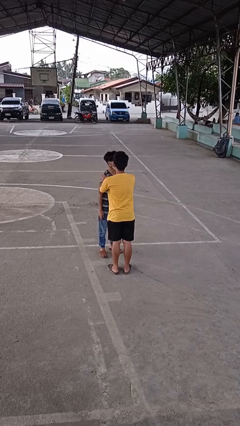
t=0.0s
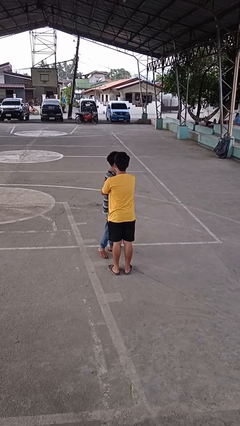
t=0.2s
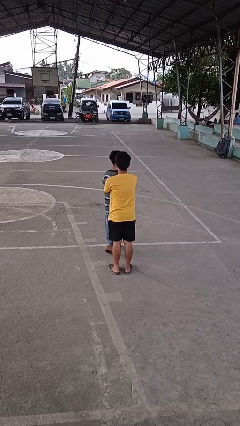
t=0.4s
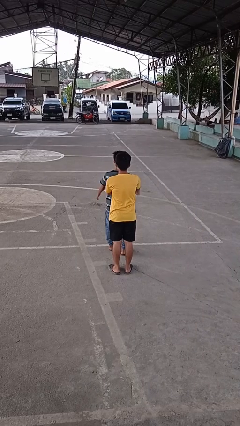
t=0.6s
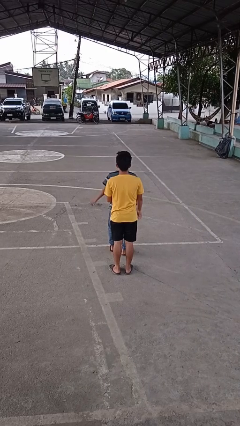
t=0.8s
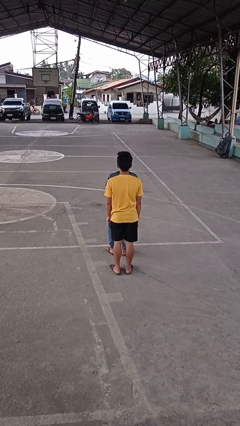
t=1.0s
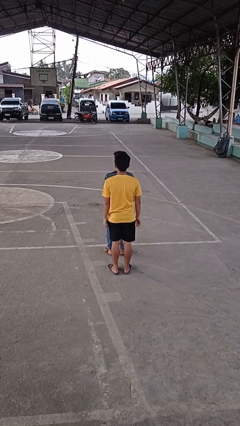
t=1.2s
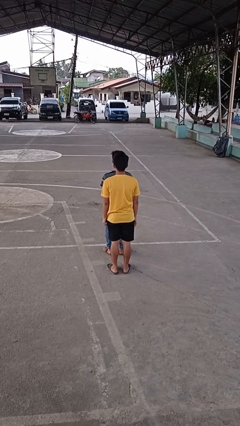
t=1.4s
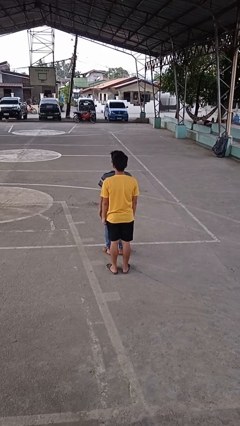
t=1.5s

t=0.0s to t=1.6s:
person spins person around

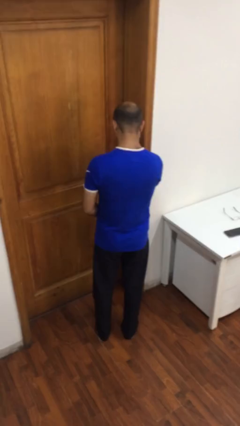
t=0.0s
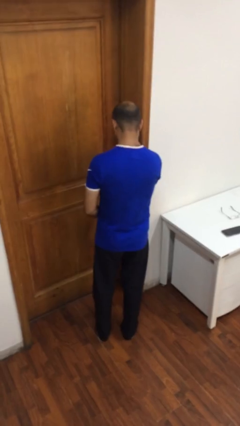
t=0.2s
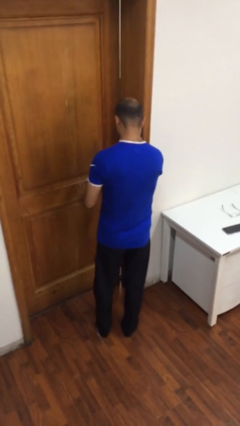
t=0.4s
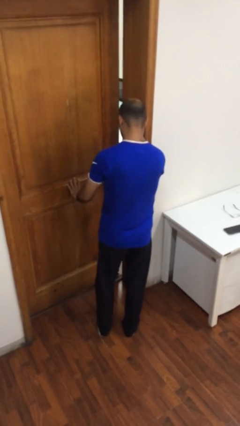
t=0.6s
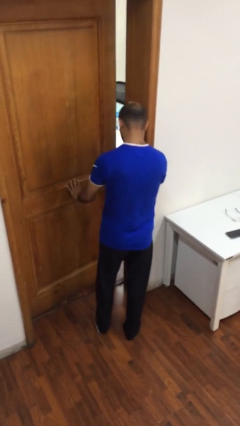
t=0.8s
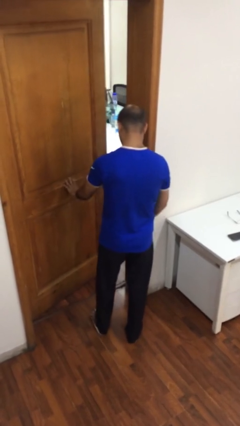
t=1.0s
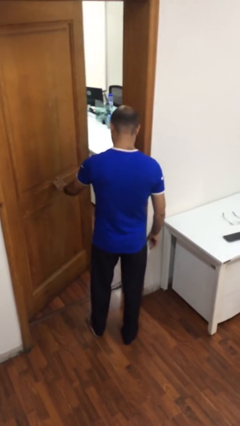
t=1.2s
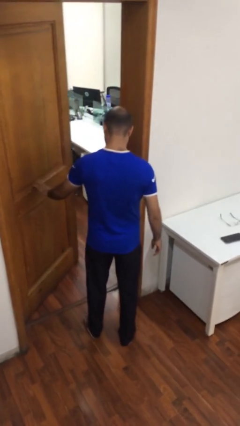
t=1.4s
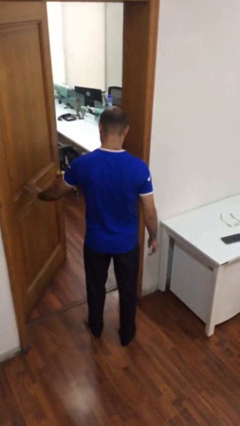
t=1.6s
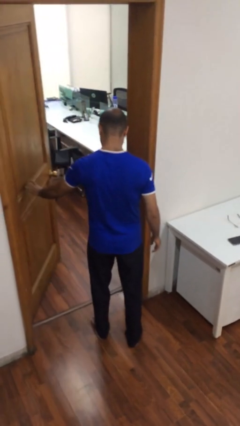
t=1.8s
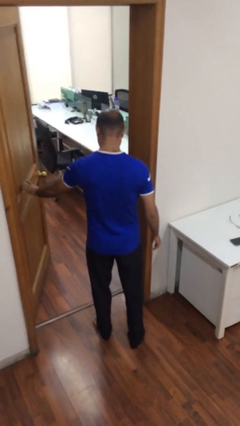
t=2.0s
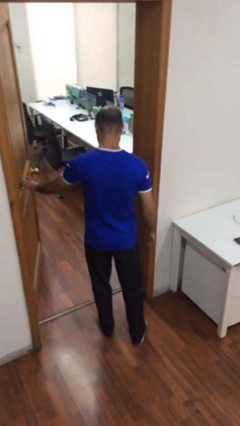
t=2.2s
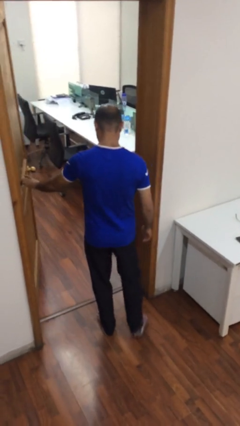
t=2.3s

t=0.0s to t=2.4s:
person opens facility door

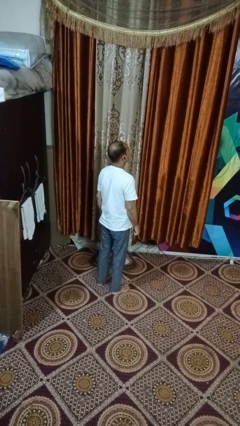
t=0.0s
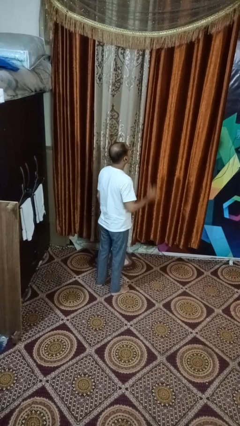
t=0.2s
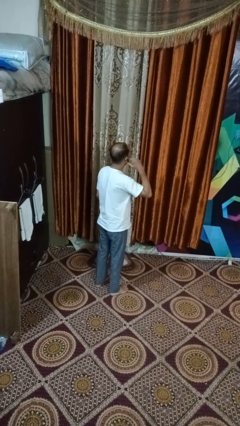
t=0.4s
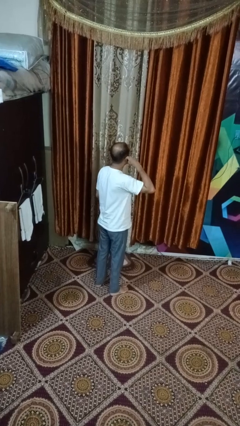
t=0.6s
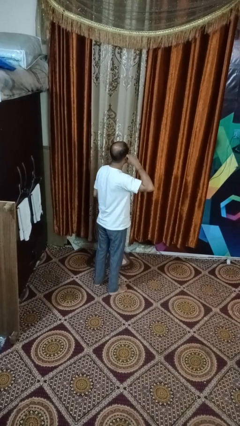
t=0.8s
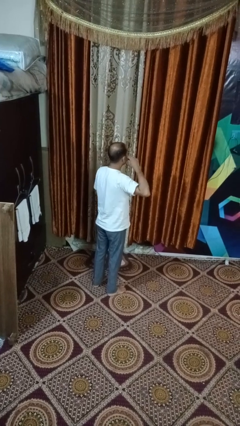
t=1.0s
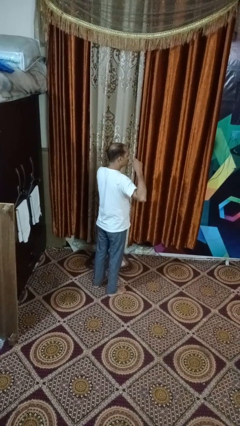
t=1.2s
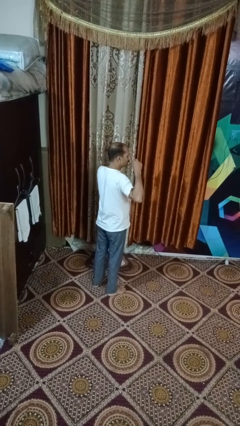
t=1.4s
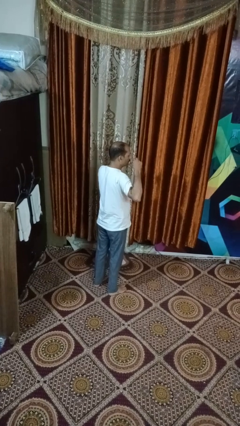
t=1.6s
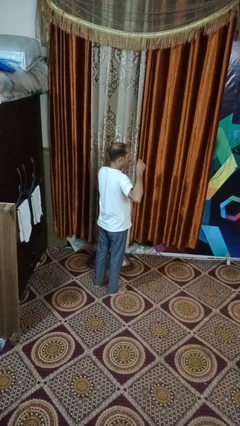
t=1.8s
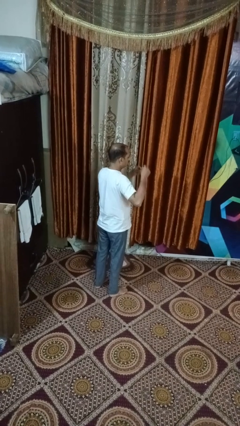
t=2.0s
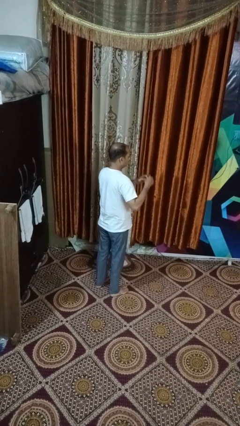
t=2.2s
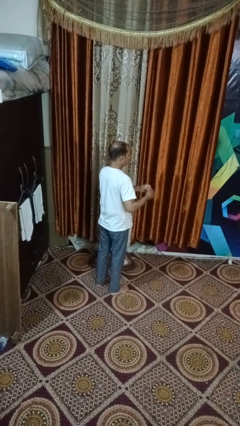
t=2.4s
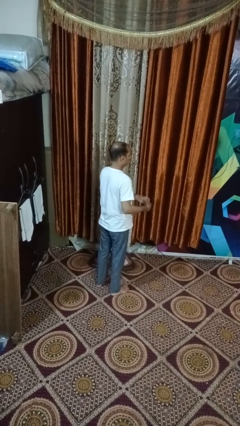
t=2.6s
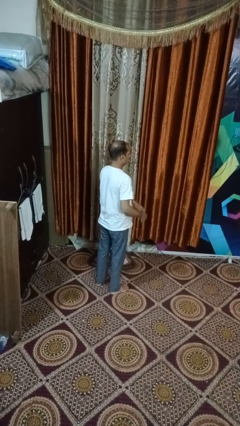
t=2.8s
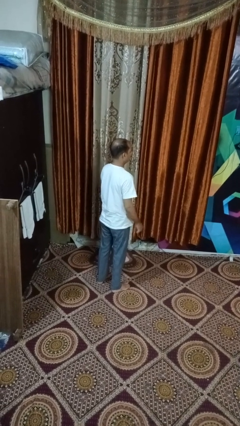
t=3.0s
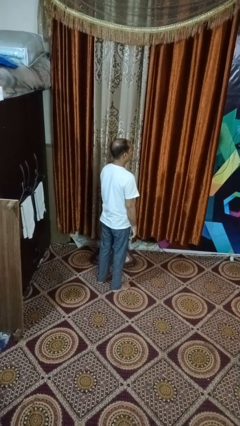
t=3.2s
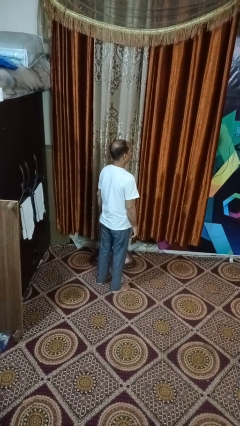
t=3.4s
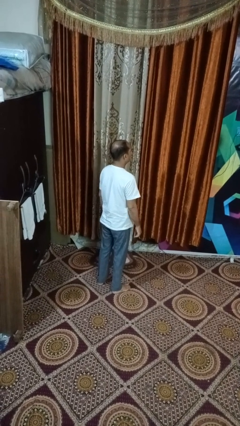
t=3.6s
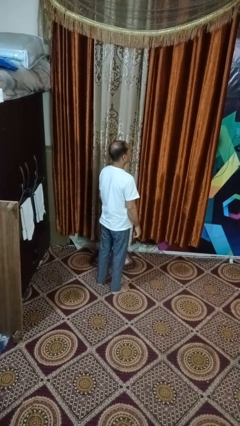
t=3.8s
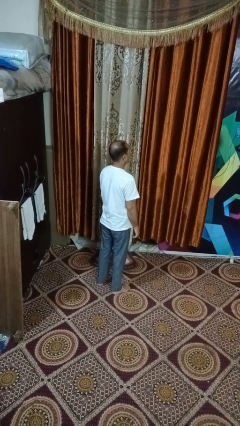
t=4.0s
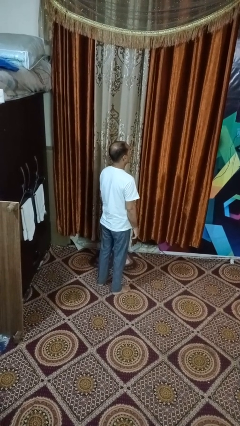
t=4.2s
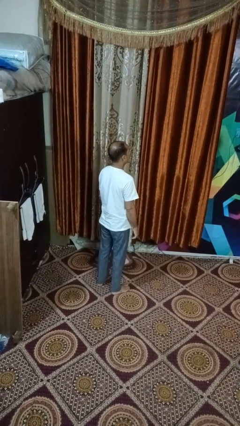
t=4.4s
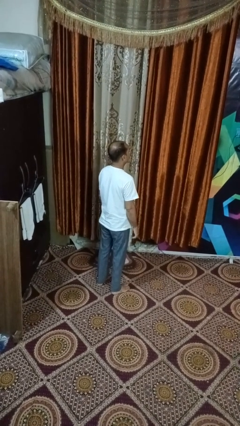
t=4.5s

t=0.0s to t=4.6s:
person takes off headphones

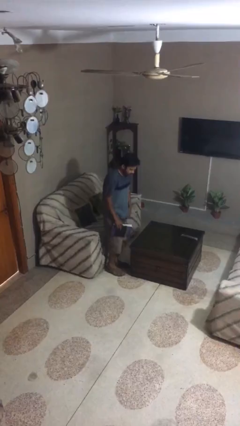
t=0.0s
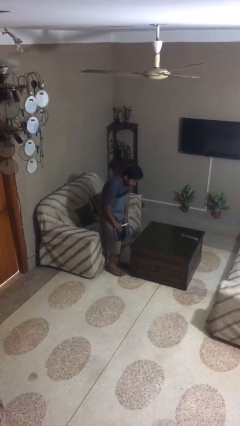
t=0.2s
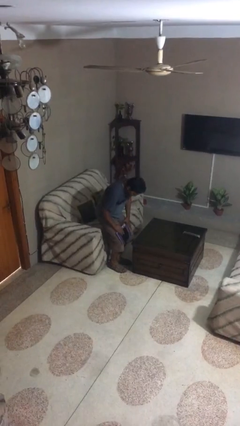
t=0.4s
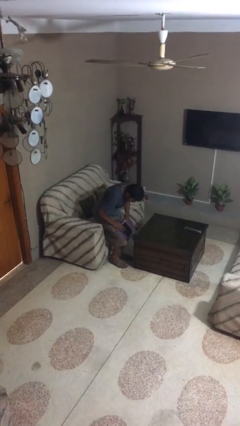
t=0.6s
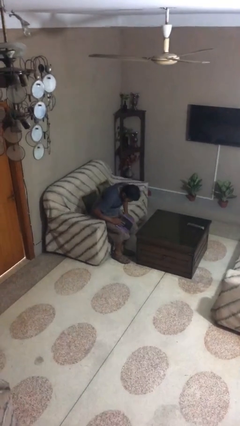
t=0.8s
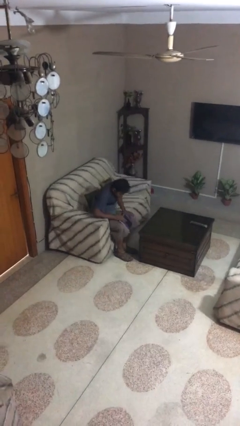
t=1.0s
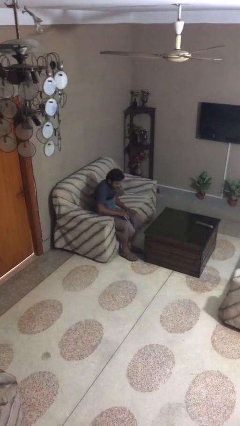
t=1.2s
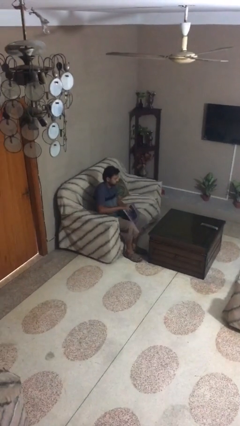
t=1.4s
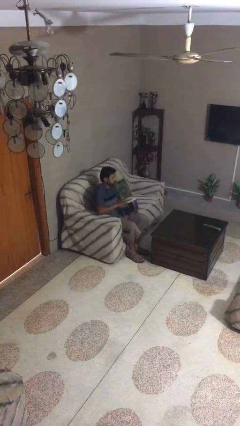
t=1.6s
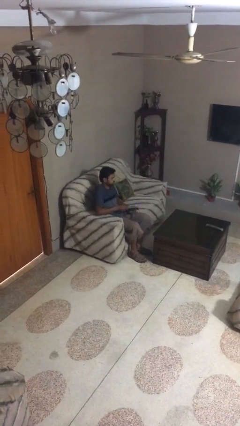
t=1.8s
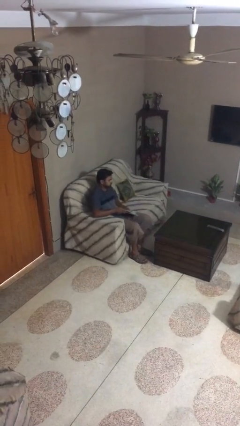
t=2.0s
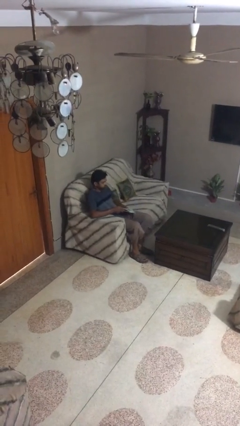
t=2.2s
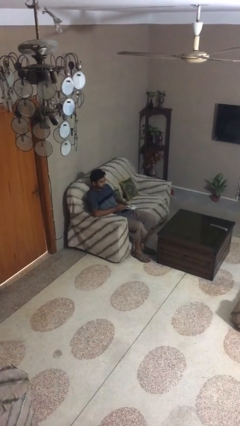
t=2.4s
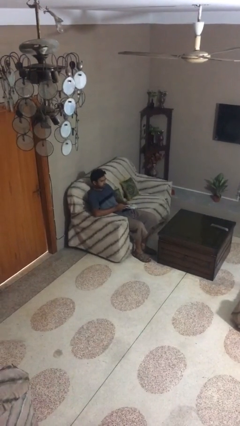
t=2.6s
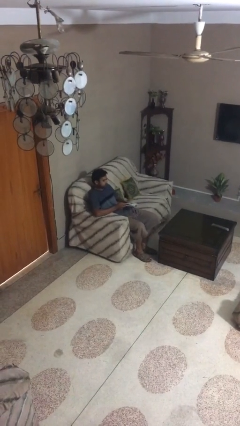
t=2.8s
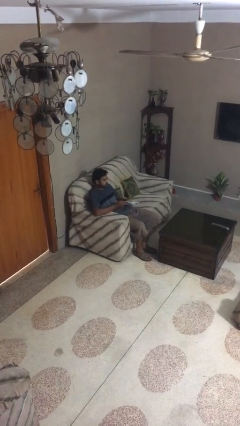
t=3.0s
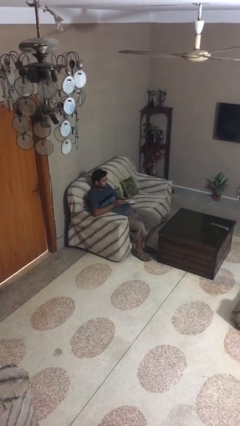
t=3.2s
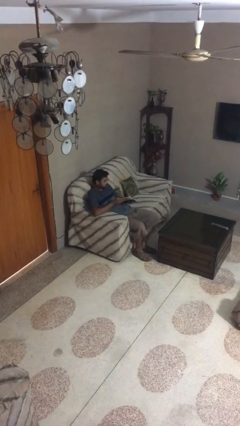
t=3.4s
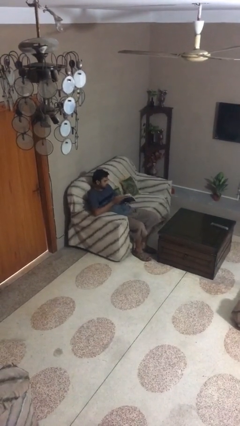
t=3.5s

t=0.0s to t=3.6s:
person sits down

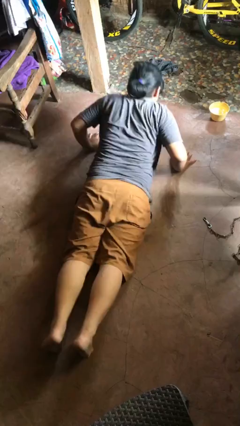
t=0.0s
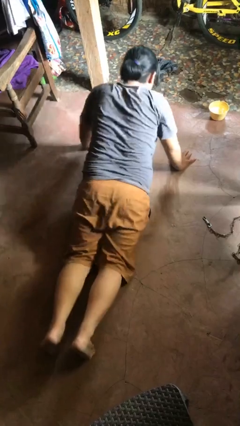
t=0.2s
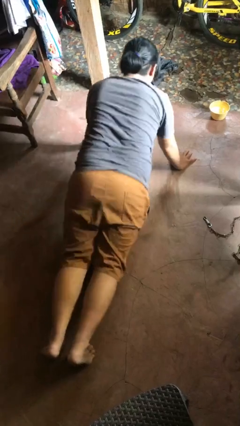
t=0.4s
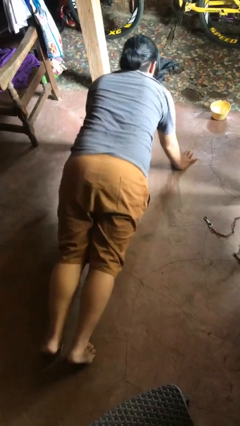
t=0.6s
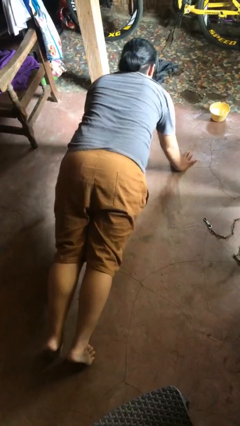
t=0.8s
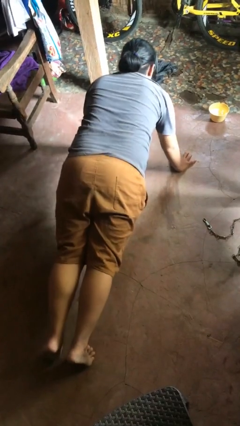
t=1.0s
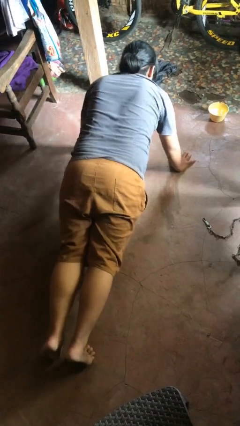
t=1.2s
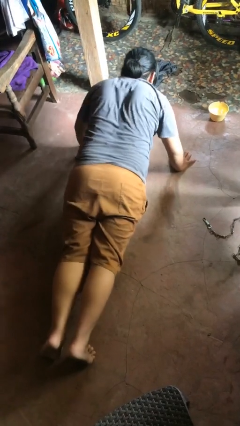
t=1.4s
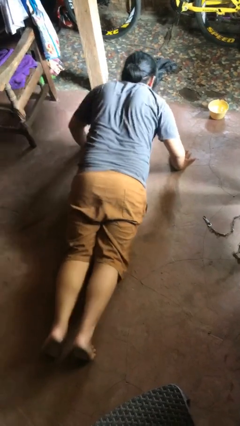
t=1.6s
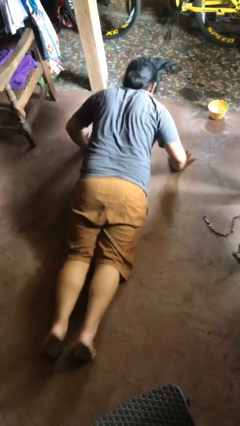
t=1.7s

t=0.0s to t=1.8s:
person exercises with pushup

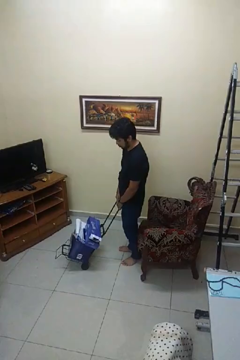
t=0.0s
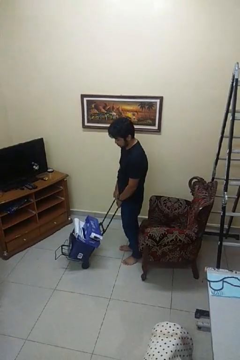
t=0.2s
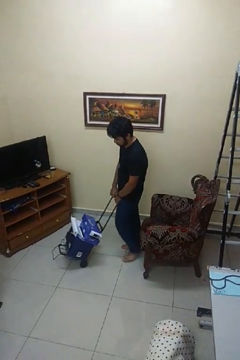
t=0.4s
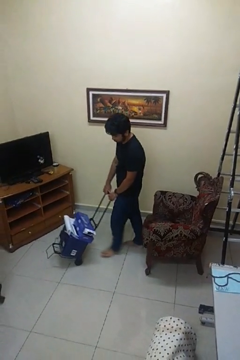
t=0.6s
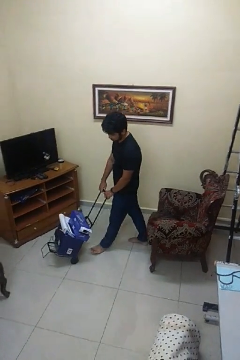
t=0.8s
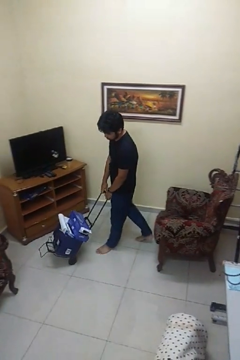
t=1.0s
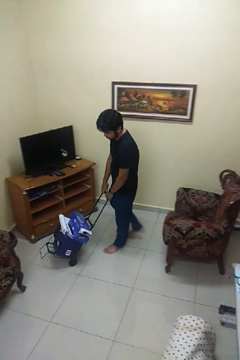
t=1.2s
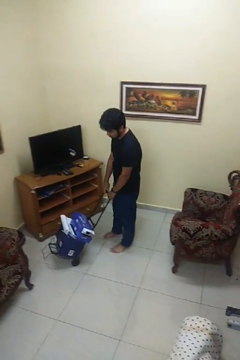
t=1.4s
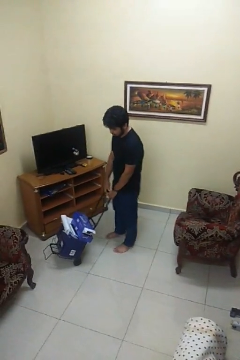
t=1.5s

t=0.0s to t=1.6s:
person pushes wheeled cart

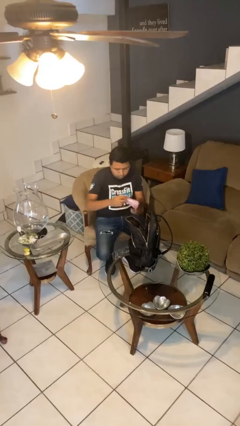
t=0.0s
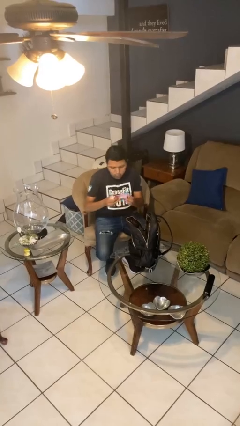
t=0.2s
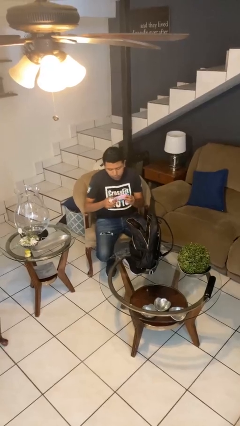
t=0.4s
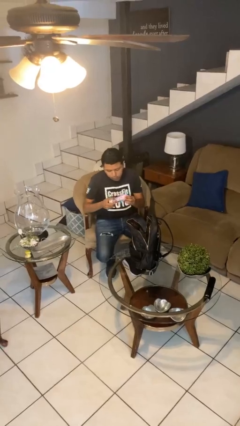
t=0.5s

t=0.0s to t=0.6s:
person takes object from backpack

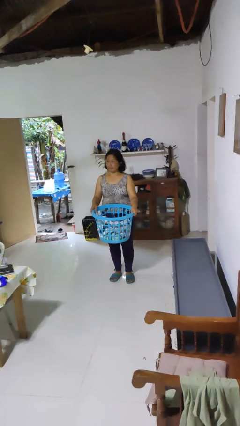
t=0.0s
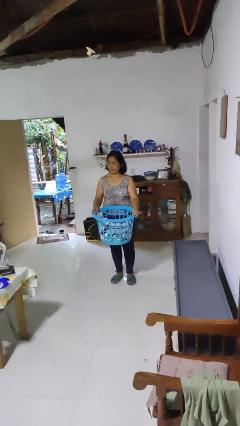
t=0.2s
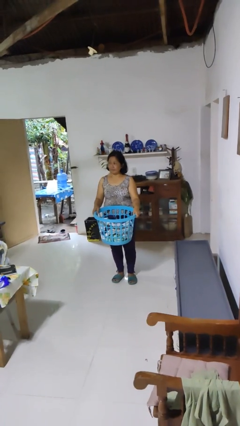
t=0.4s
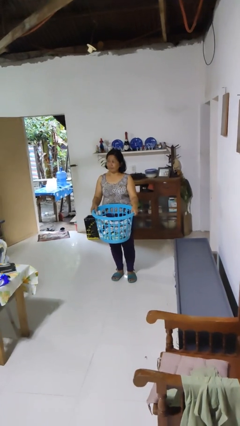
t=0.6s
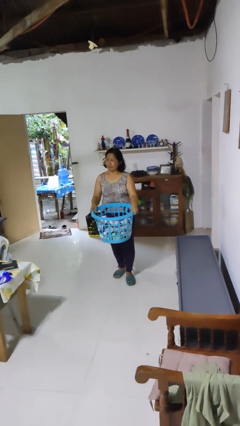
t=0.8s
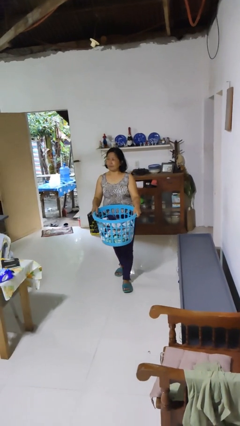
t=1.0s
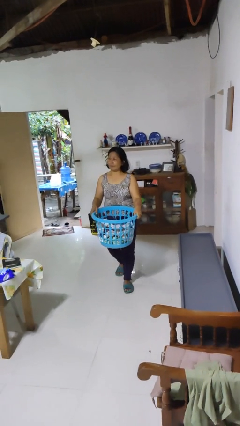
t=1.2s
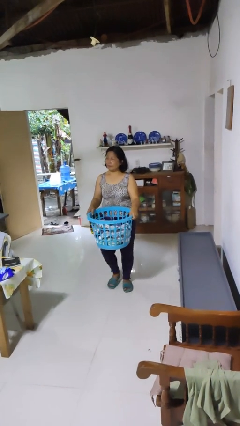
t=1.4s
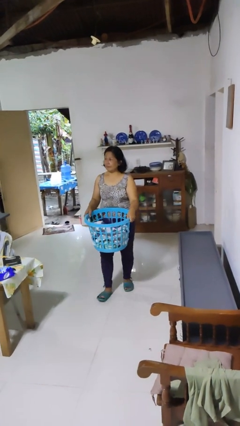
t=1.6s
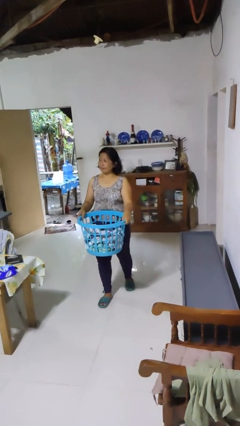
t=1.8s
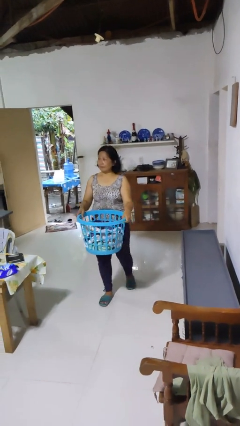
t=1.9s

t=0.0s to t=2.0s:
person carries laundry basket
